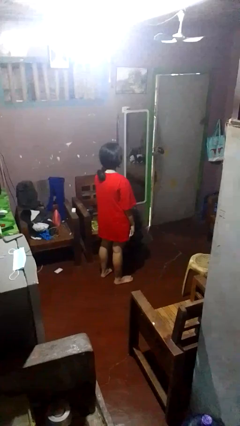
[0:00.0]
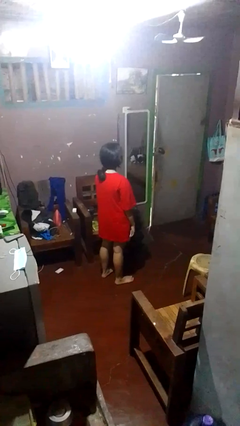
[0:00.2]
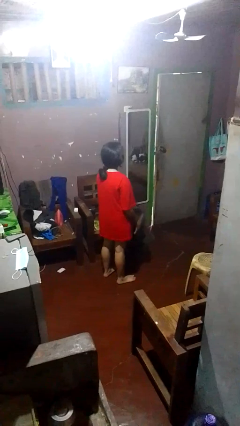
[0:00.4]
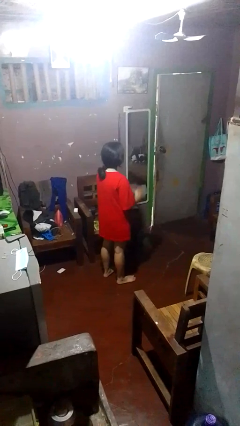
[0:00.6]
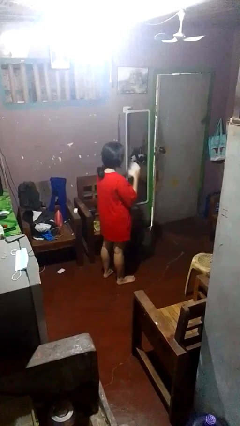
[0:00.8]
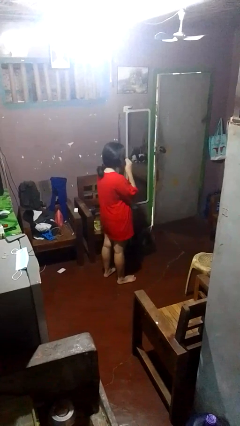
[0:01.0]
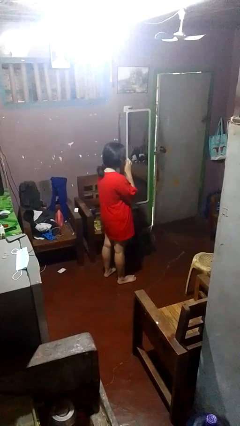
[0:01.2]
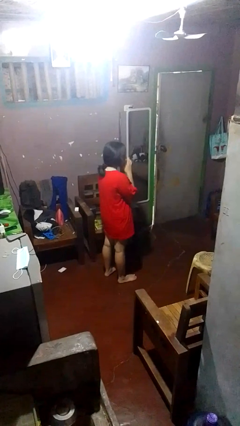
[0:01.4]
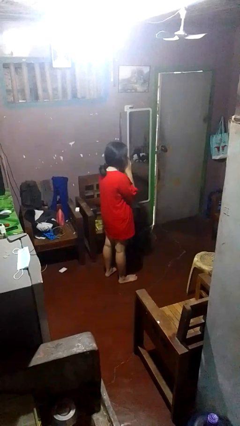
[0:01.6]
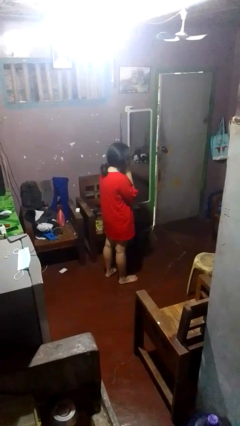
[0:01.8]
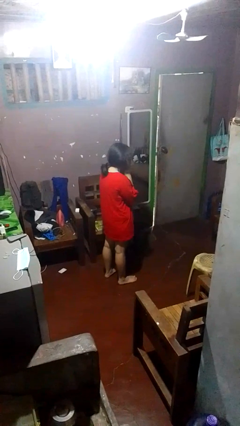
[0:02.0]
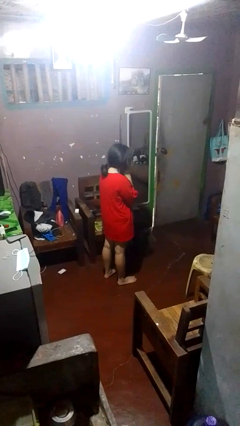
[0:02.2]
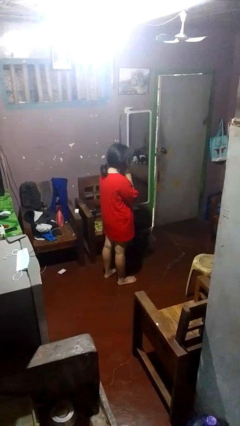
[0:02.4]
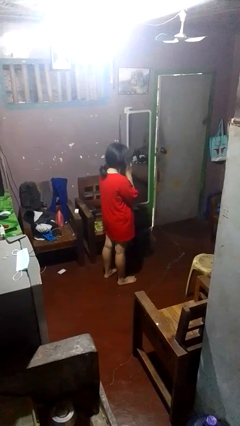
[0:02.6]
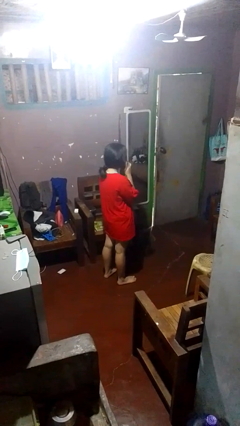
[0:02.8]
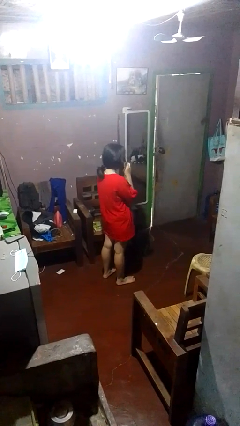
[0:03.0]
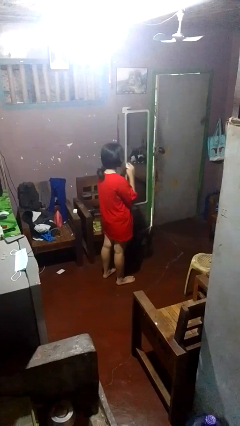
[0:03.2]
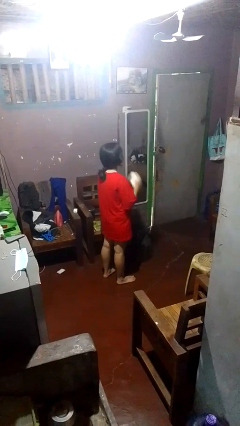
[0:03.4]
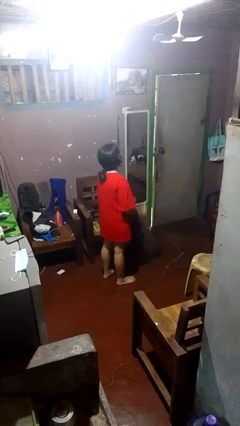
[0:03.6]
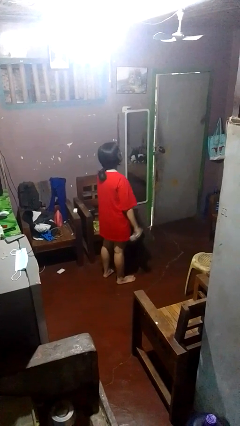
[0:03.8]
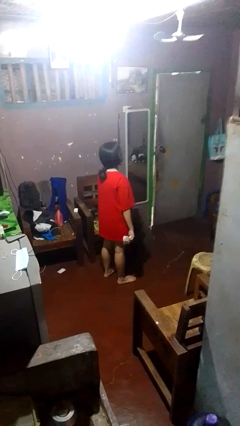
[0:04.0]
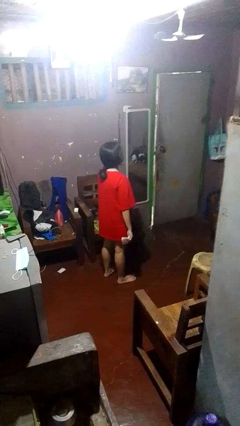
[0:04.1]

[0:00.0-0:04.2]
person blows nose

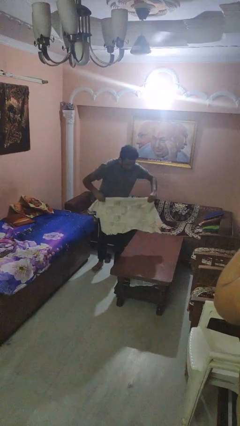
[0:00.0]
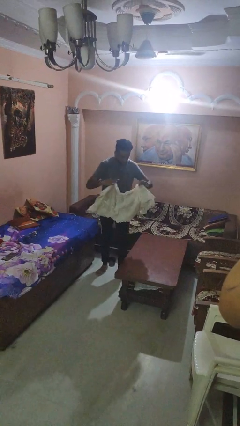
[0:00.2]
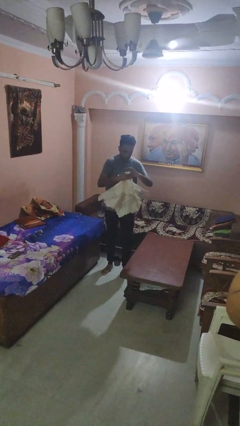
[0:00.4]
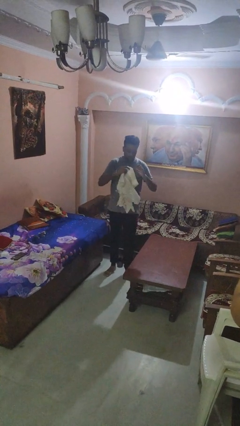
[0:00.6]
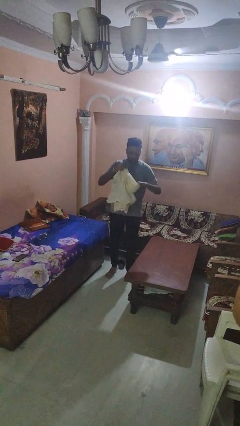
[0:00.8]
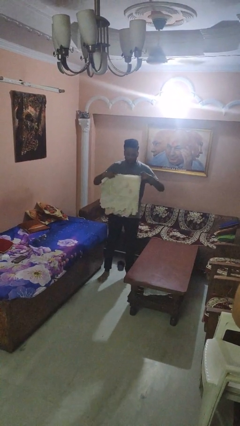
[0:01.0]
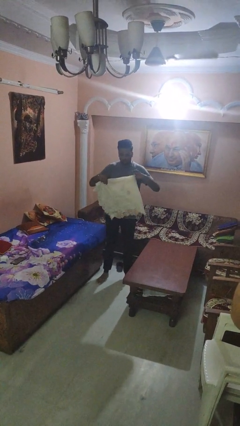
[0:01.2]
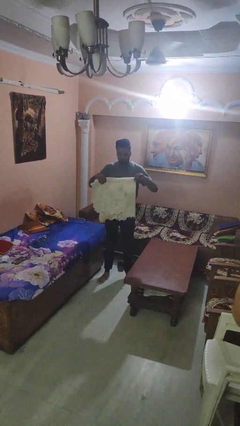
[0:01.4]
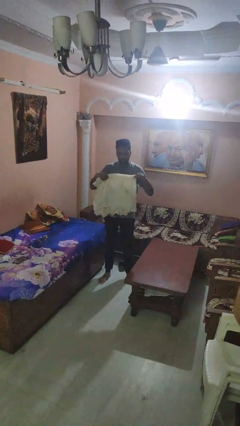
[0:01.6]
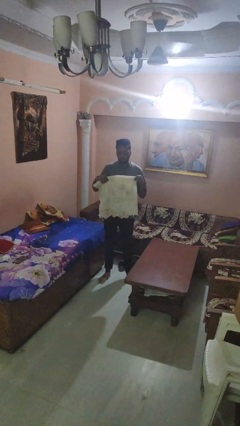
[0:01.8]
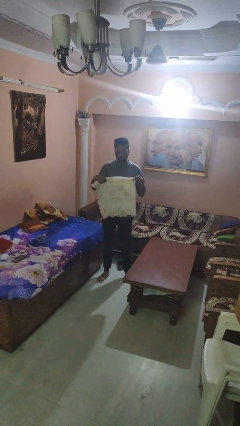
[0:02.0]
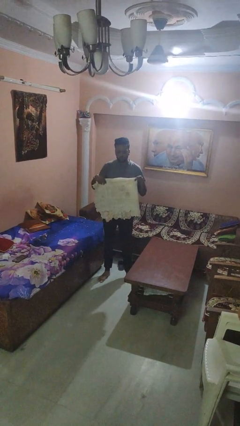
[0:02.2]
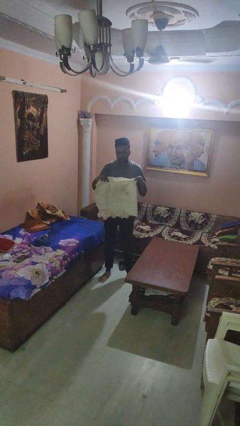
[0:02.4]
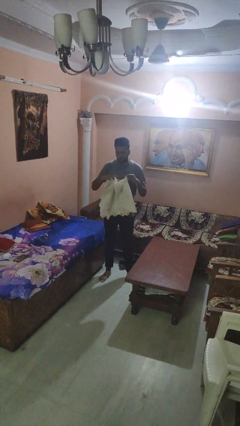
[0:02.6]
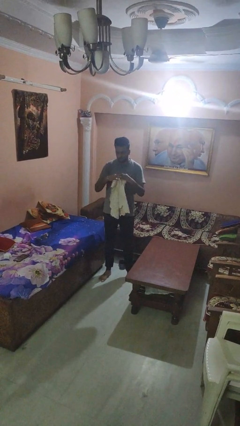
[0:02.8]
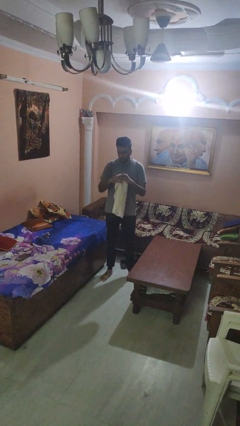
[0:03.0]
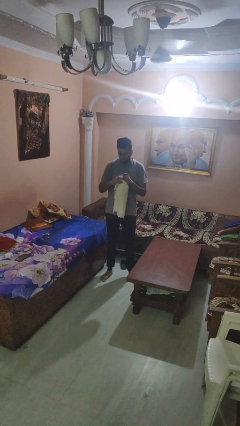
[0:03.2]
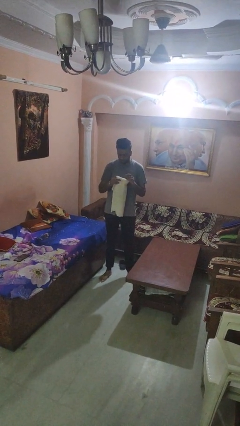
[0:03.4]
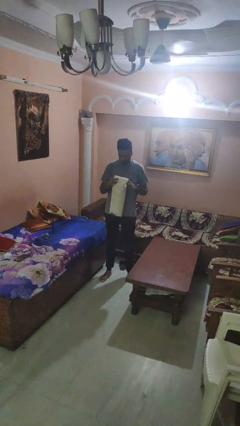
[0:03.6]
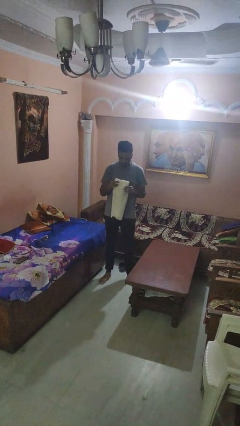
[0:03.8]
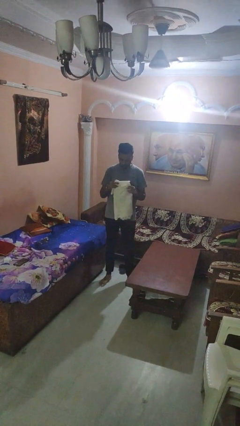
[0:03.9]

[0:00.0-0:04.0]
person folds tablecloth

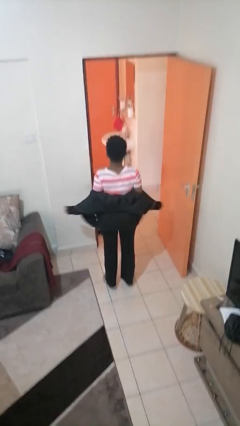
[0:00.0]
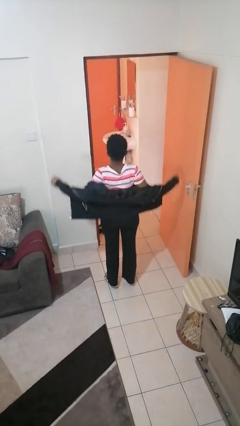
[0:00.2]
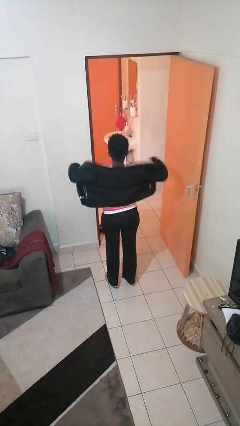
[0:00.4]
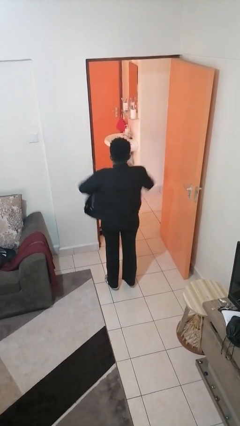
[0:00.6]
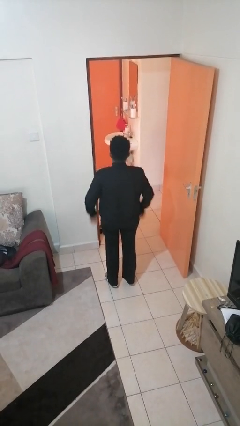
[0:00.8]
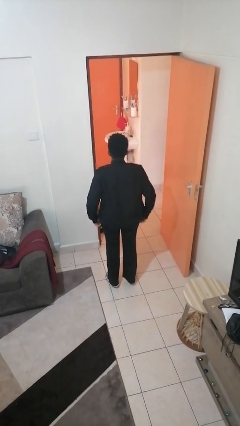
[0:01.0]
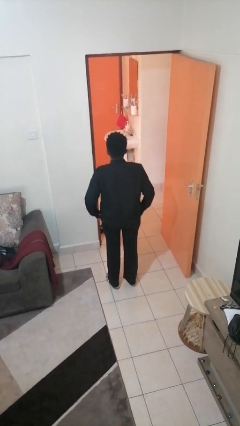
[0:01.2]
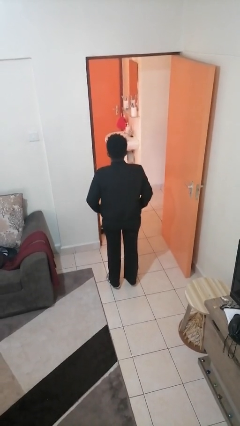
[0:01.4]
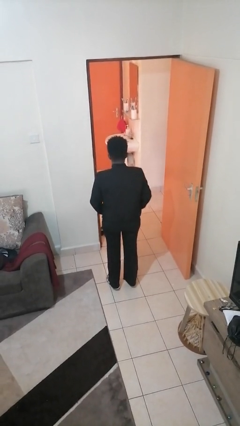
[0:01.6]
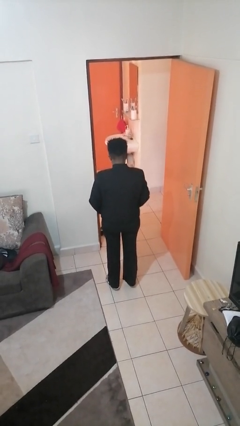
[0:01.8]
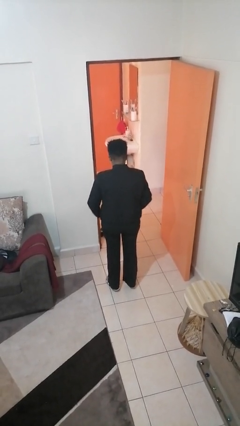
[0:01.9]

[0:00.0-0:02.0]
person puts on jacket

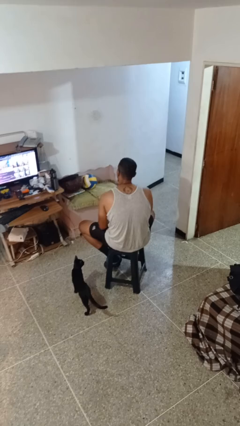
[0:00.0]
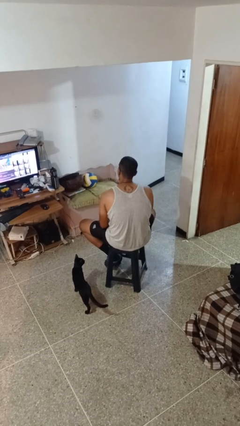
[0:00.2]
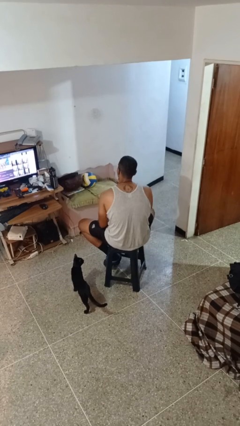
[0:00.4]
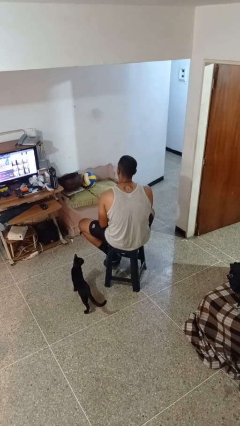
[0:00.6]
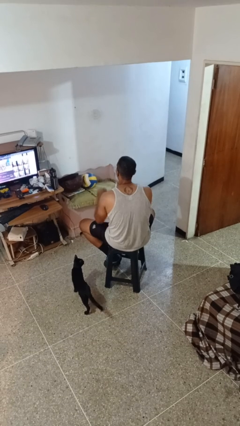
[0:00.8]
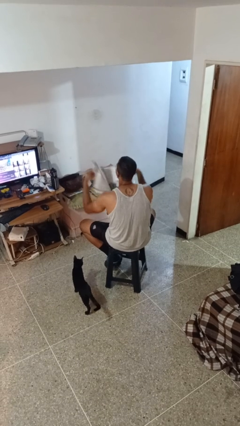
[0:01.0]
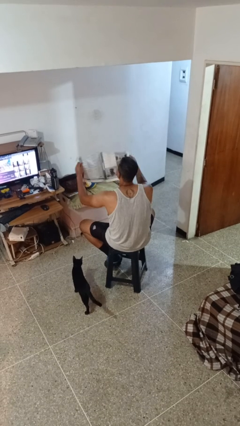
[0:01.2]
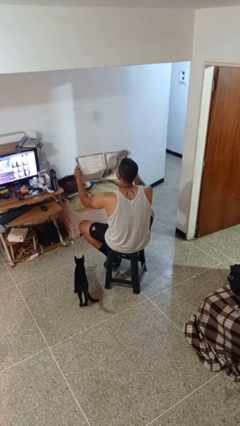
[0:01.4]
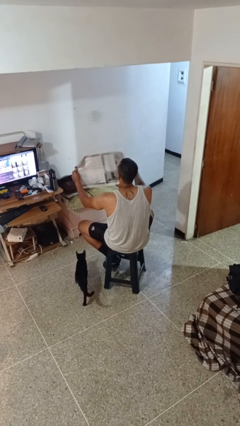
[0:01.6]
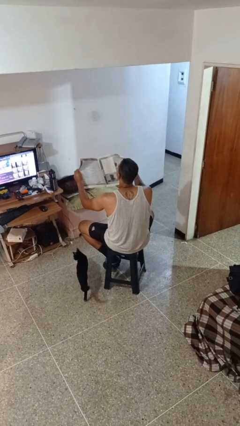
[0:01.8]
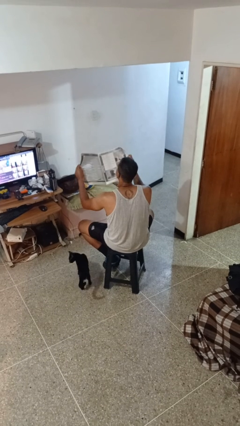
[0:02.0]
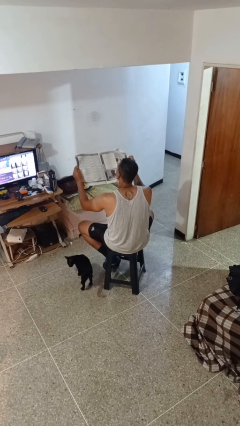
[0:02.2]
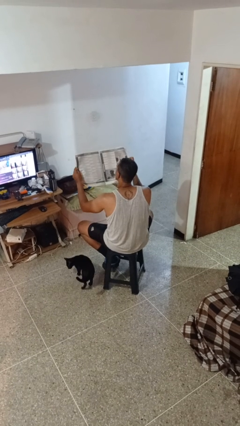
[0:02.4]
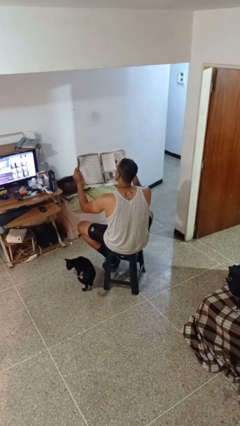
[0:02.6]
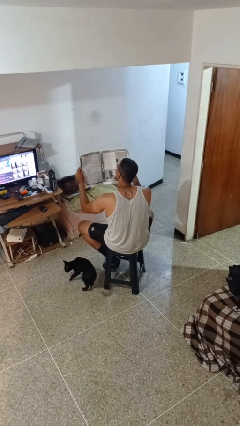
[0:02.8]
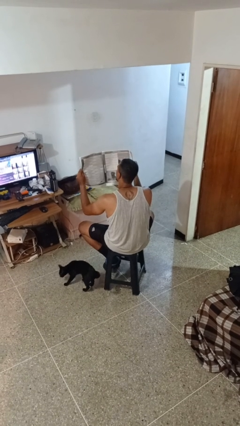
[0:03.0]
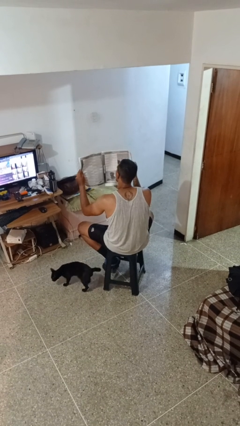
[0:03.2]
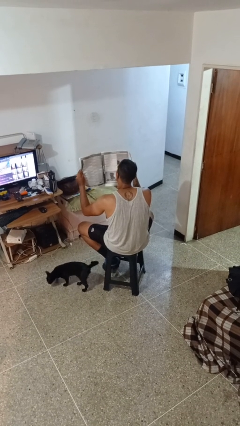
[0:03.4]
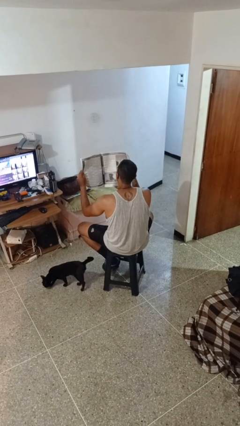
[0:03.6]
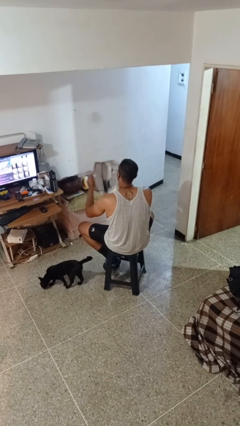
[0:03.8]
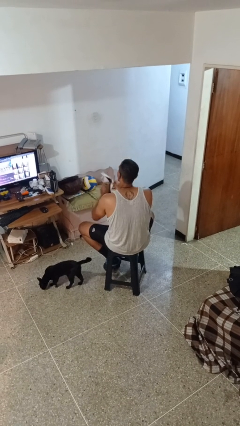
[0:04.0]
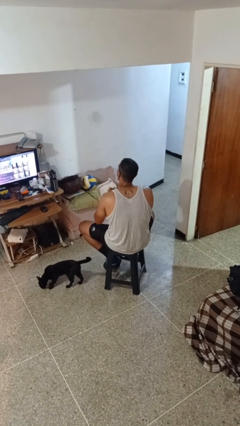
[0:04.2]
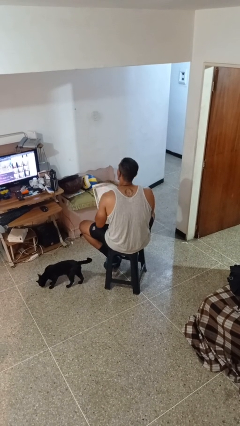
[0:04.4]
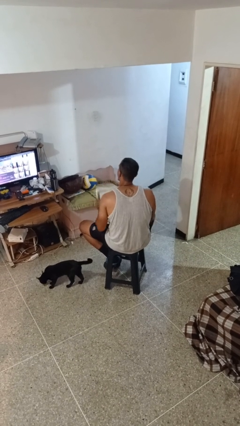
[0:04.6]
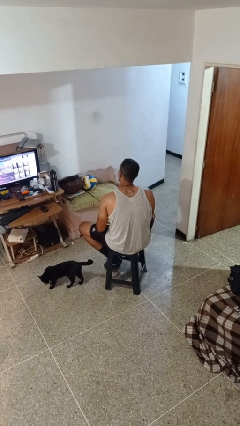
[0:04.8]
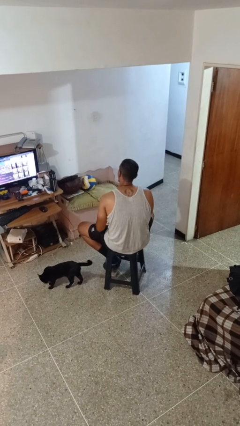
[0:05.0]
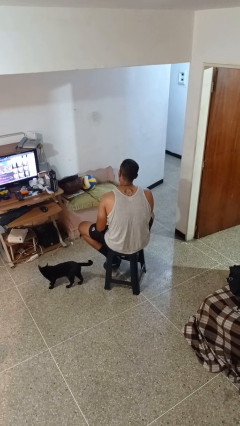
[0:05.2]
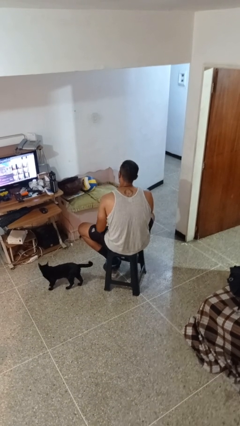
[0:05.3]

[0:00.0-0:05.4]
person reads newspaper

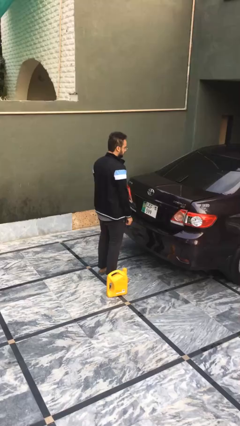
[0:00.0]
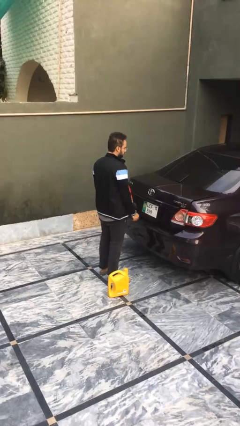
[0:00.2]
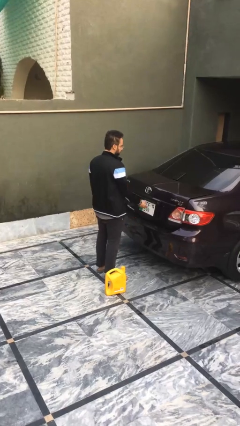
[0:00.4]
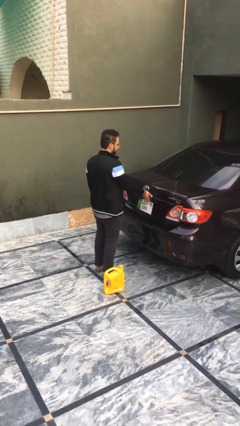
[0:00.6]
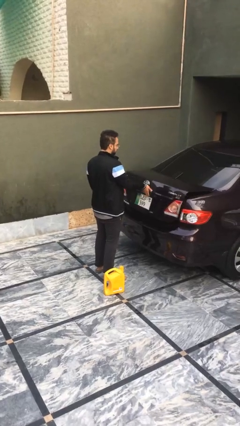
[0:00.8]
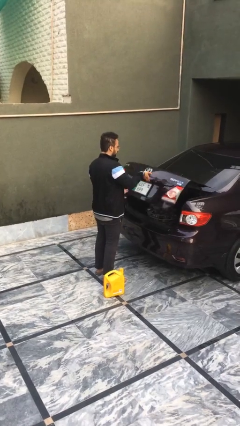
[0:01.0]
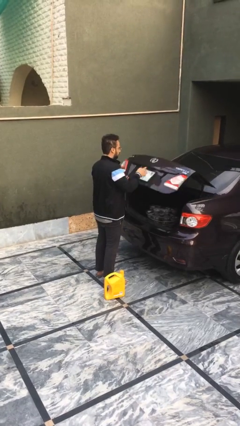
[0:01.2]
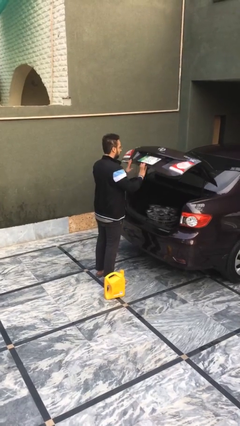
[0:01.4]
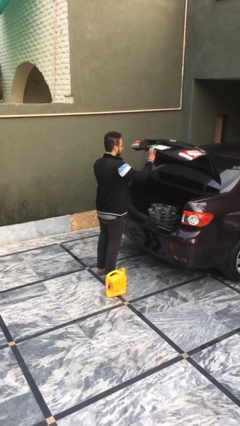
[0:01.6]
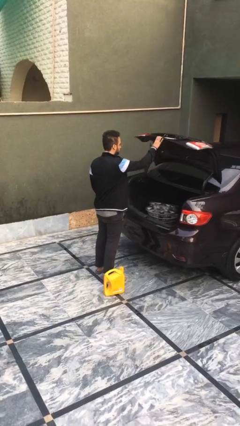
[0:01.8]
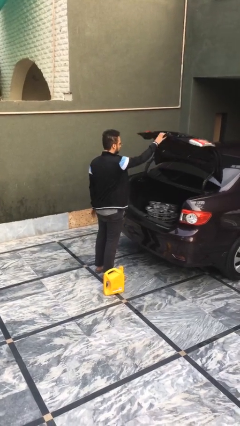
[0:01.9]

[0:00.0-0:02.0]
person opens car trunk
